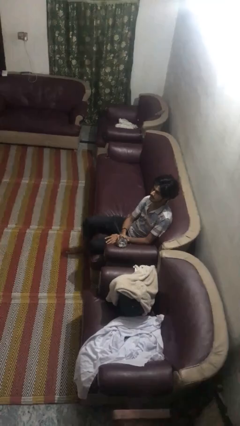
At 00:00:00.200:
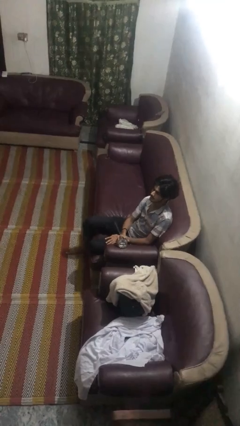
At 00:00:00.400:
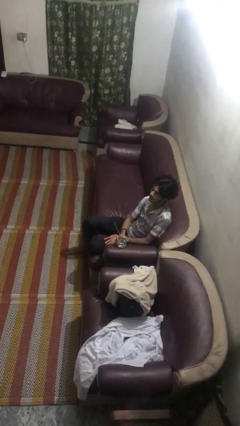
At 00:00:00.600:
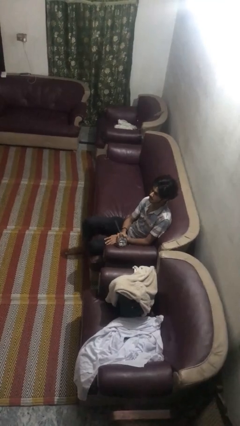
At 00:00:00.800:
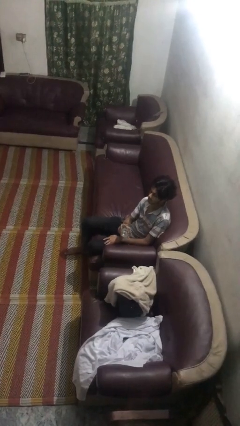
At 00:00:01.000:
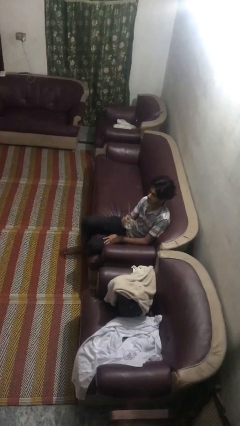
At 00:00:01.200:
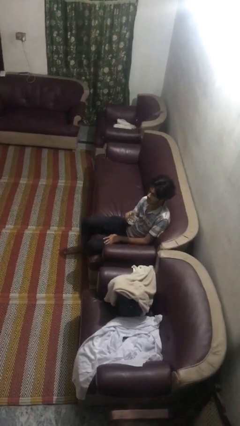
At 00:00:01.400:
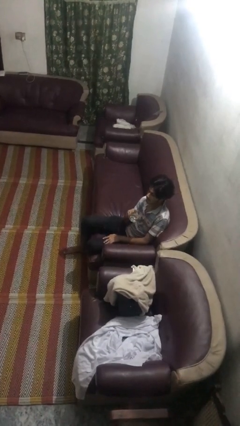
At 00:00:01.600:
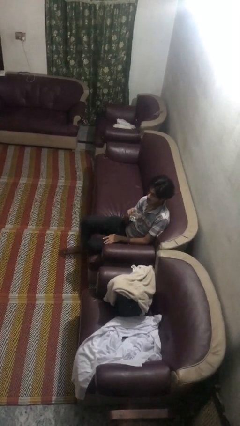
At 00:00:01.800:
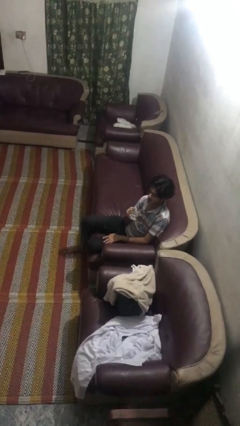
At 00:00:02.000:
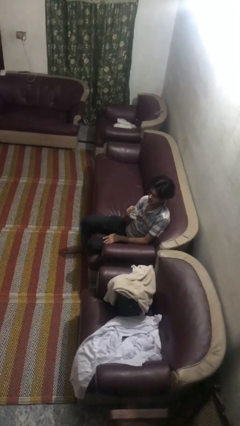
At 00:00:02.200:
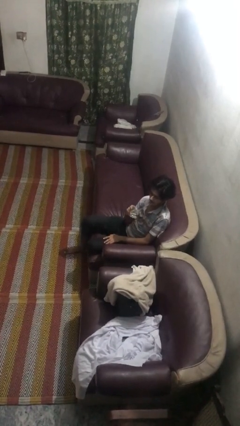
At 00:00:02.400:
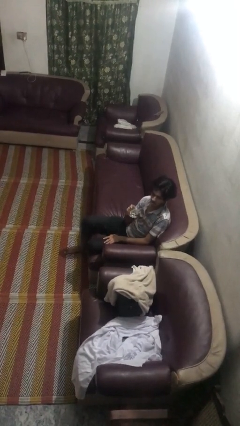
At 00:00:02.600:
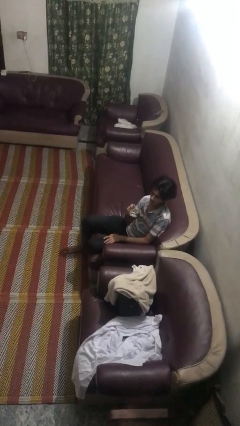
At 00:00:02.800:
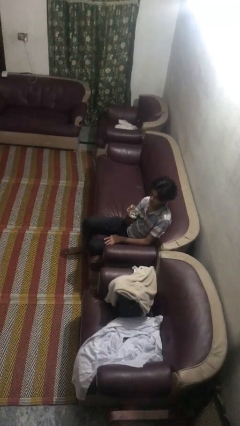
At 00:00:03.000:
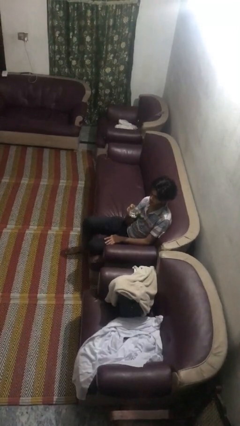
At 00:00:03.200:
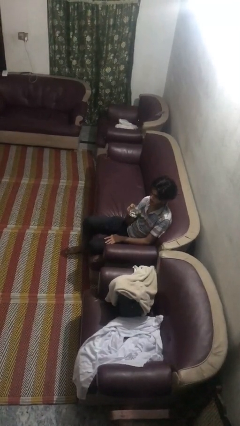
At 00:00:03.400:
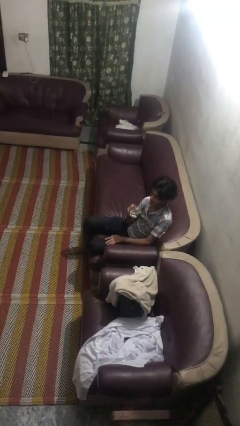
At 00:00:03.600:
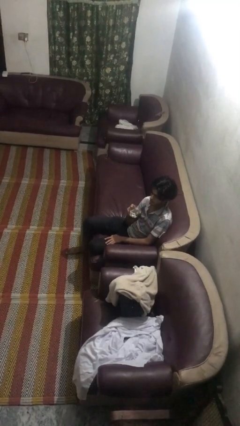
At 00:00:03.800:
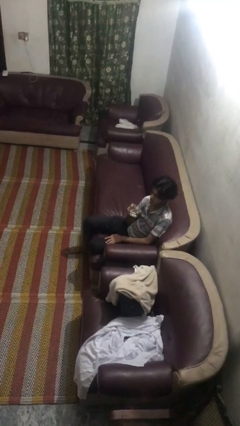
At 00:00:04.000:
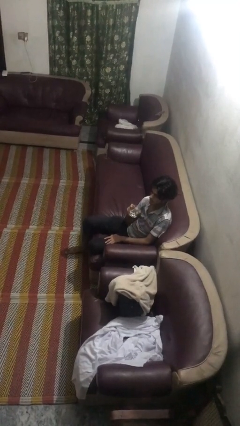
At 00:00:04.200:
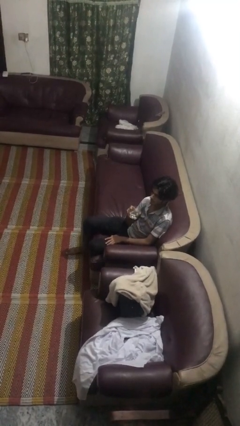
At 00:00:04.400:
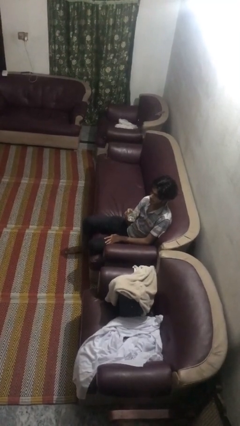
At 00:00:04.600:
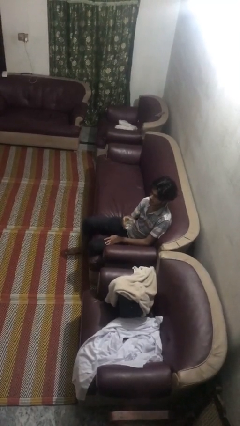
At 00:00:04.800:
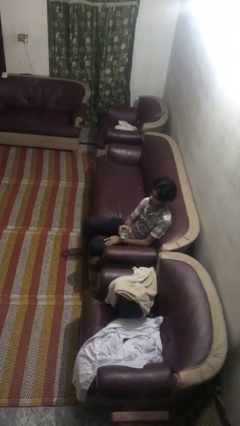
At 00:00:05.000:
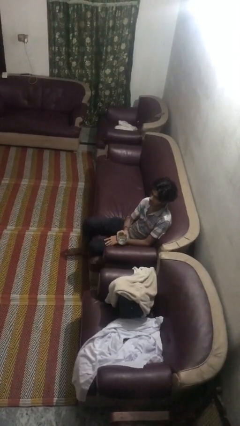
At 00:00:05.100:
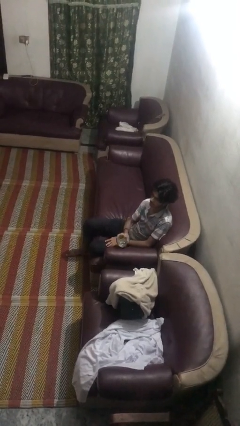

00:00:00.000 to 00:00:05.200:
person drinks from straw

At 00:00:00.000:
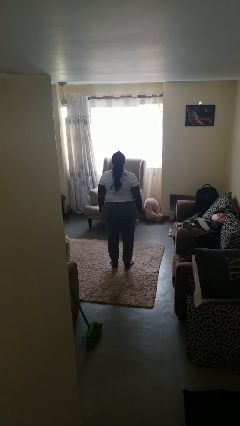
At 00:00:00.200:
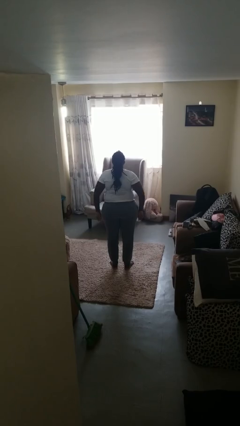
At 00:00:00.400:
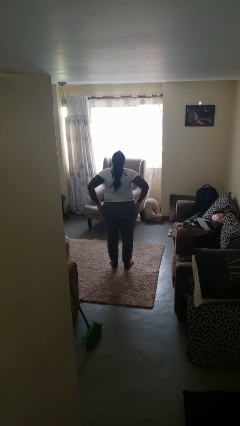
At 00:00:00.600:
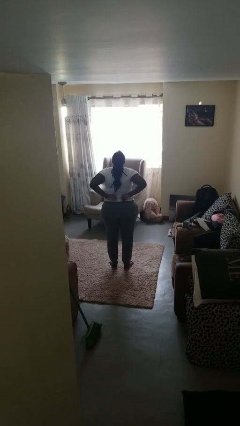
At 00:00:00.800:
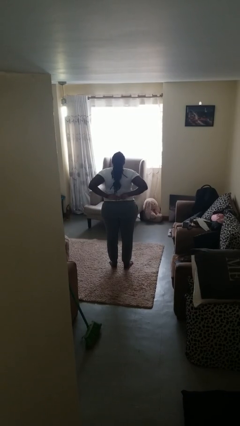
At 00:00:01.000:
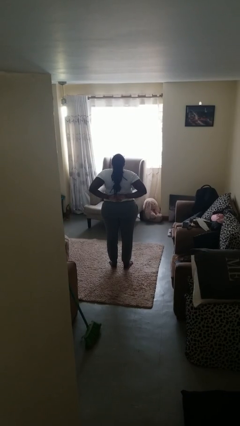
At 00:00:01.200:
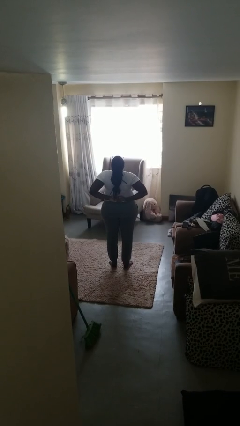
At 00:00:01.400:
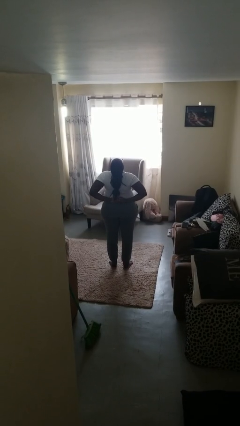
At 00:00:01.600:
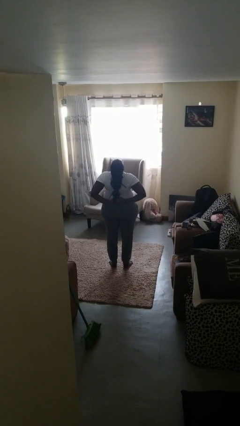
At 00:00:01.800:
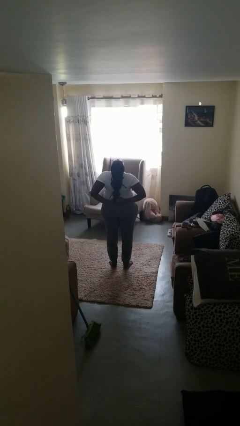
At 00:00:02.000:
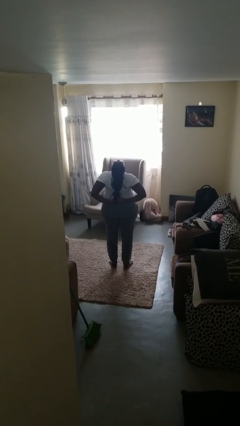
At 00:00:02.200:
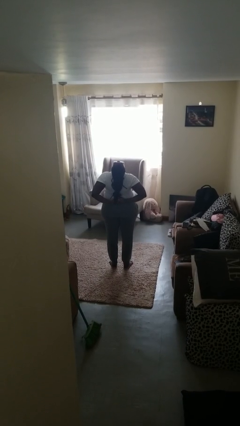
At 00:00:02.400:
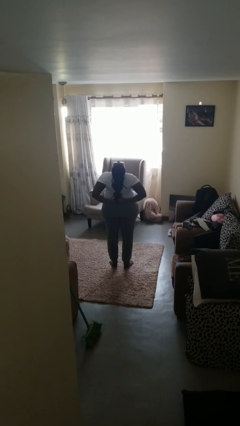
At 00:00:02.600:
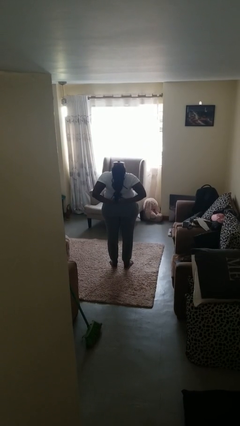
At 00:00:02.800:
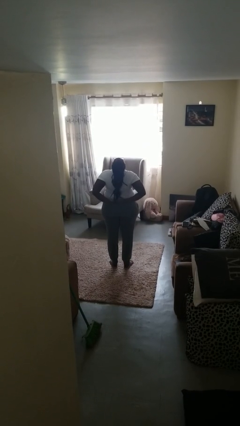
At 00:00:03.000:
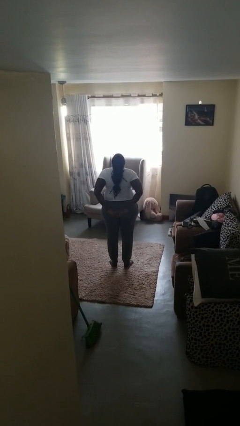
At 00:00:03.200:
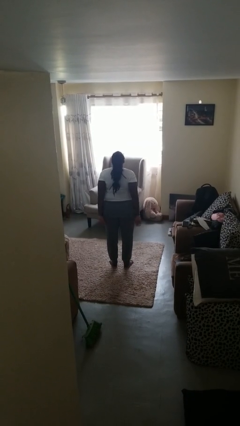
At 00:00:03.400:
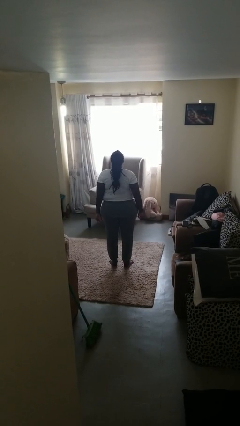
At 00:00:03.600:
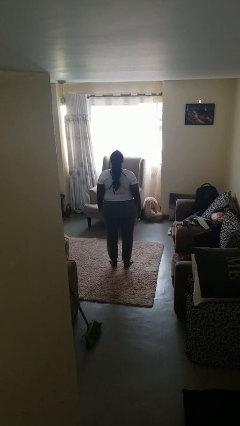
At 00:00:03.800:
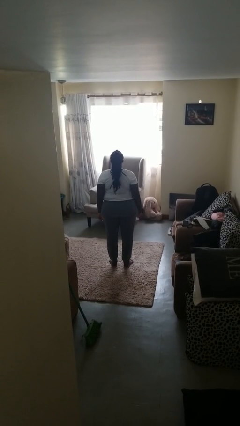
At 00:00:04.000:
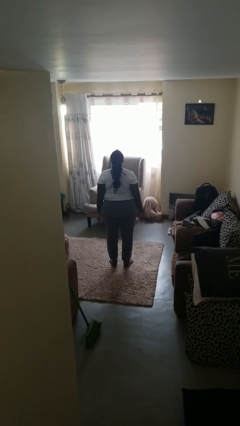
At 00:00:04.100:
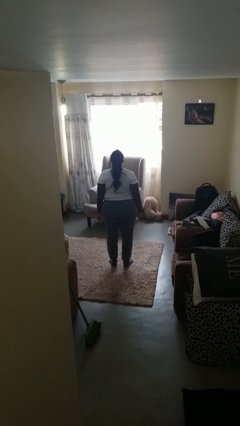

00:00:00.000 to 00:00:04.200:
person stretches back

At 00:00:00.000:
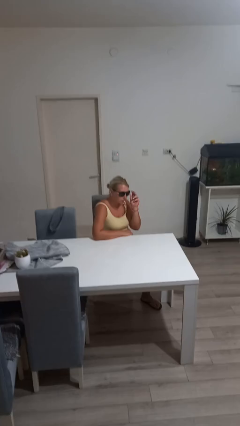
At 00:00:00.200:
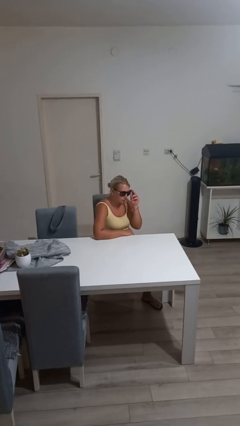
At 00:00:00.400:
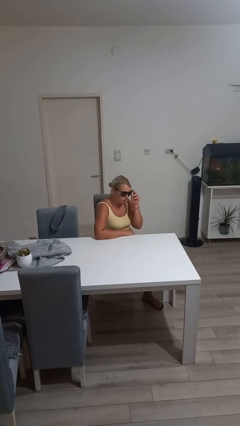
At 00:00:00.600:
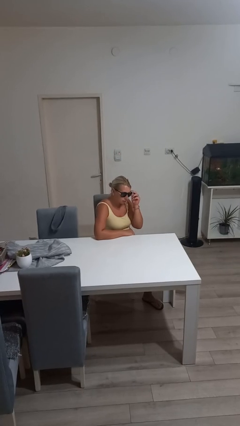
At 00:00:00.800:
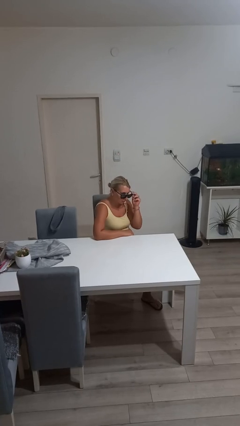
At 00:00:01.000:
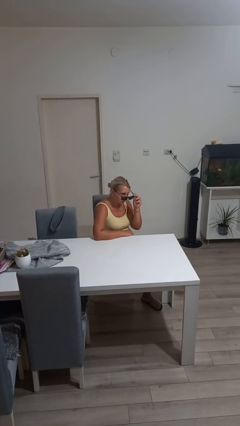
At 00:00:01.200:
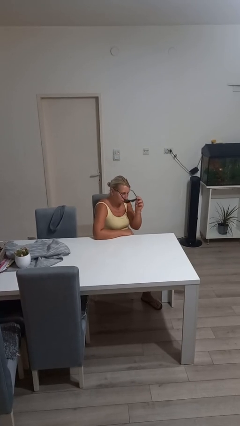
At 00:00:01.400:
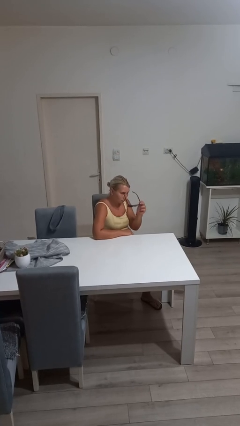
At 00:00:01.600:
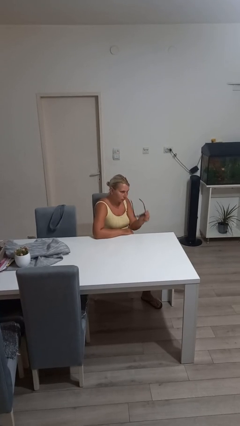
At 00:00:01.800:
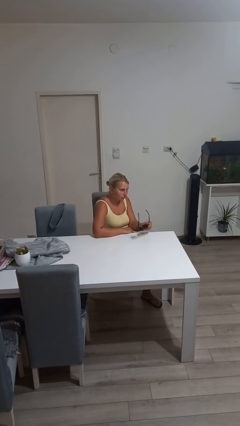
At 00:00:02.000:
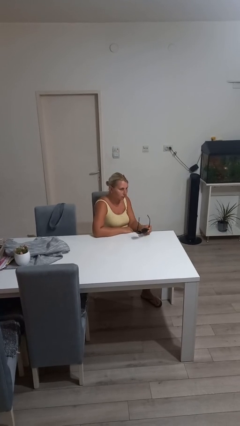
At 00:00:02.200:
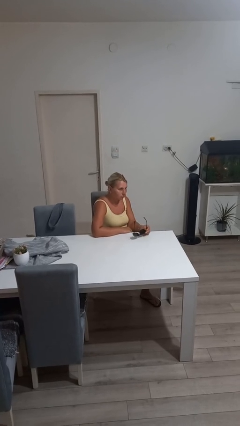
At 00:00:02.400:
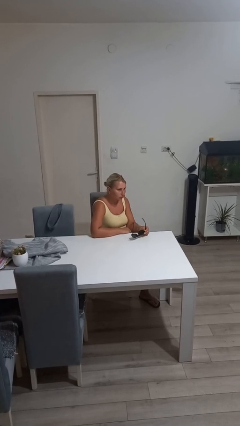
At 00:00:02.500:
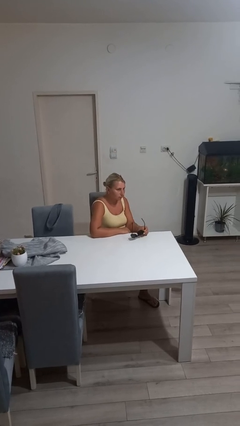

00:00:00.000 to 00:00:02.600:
person takes off sunglasses

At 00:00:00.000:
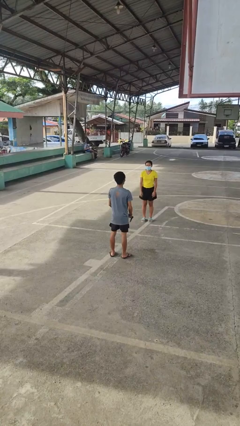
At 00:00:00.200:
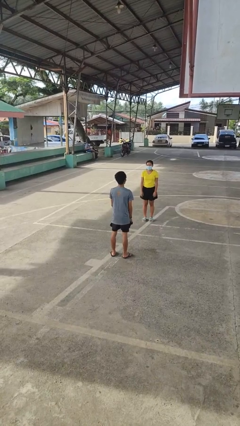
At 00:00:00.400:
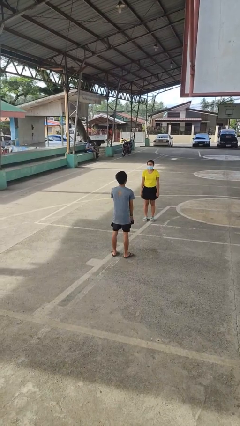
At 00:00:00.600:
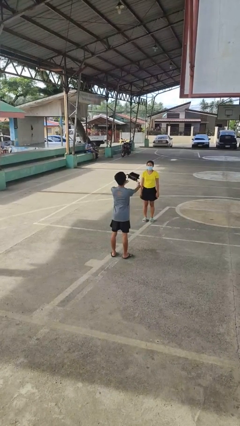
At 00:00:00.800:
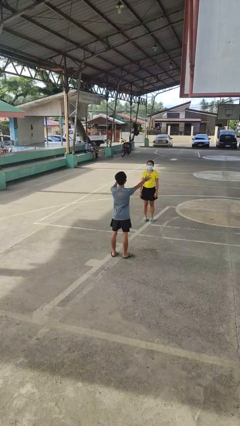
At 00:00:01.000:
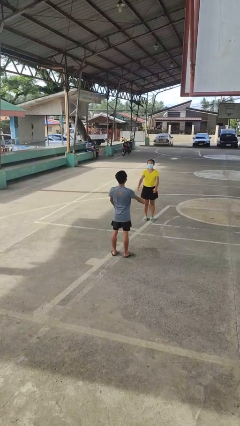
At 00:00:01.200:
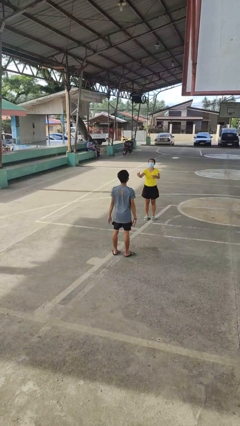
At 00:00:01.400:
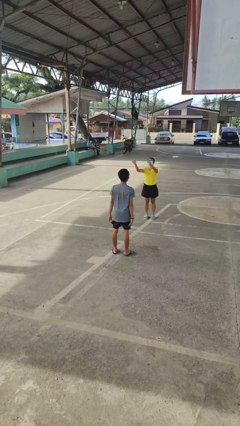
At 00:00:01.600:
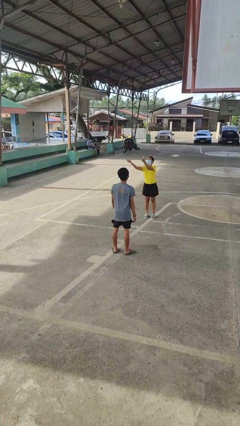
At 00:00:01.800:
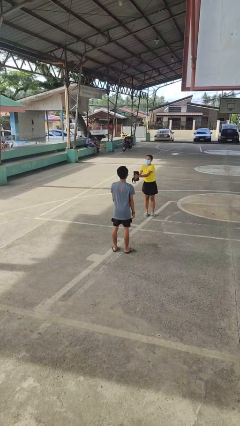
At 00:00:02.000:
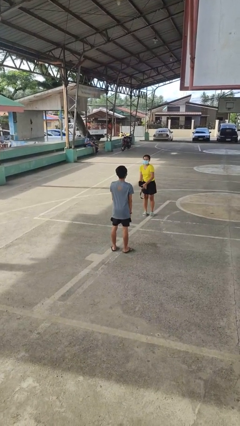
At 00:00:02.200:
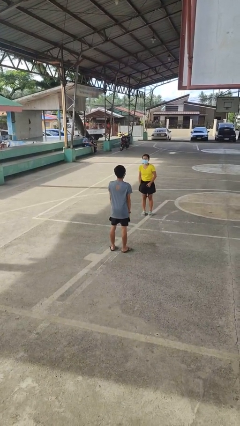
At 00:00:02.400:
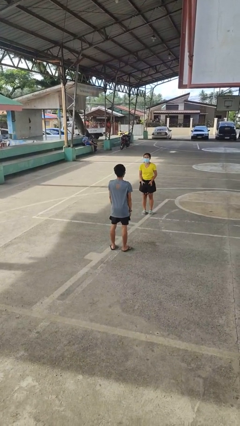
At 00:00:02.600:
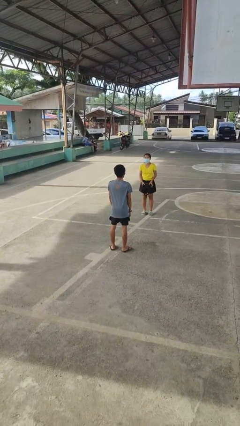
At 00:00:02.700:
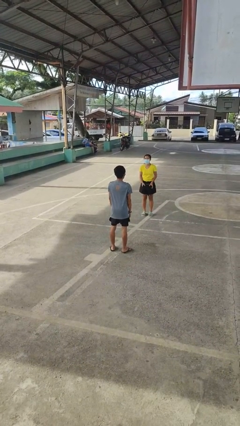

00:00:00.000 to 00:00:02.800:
person throws object to person

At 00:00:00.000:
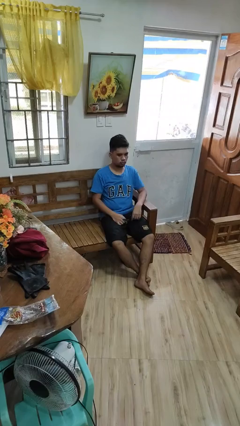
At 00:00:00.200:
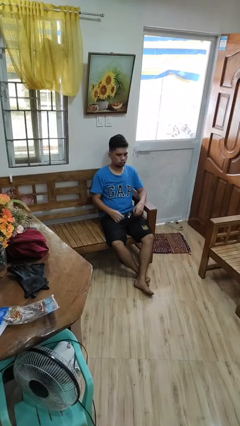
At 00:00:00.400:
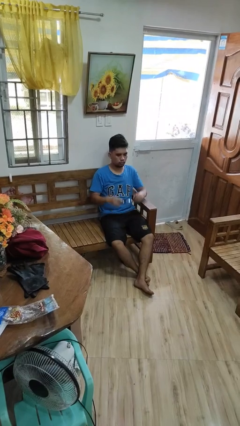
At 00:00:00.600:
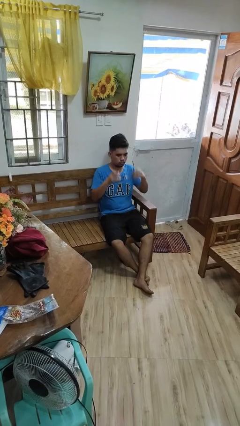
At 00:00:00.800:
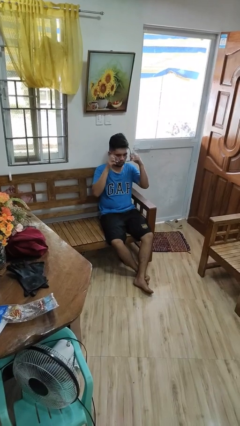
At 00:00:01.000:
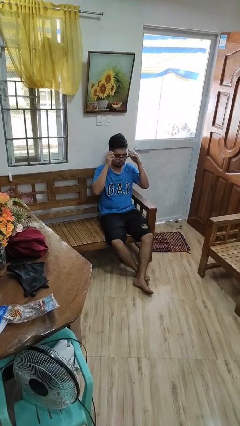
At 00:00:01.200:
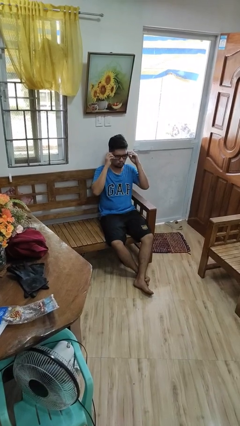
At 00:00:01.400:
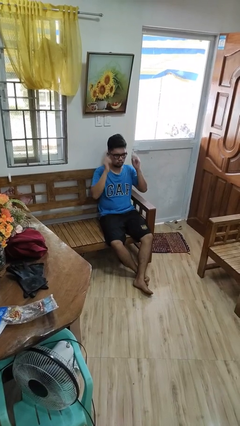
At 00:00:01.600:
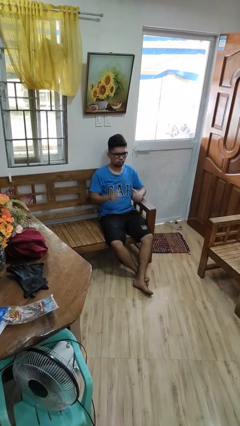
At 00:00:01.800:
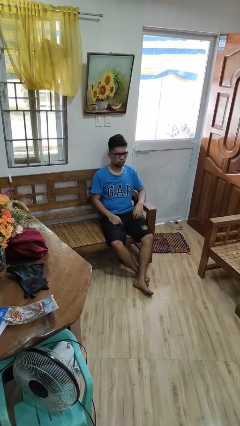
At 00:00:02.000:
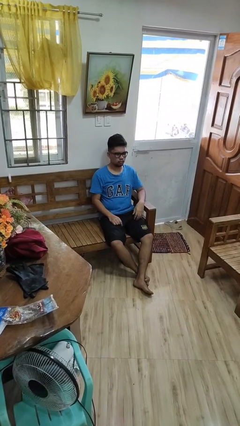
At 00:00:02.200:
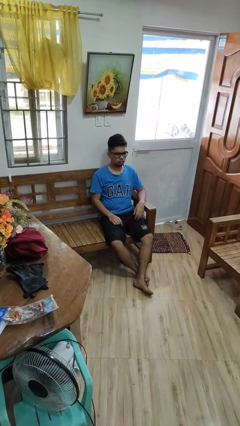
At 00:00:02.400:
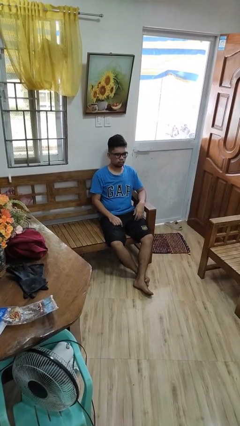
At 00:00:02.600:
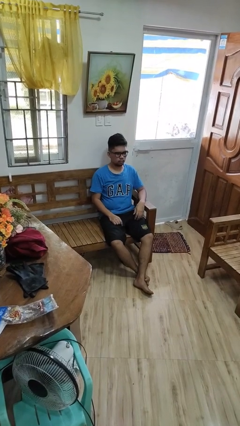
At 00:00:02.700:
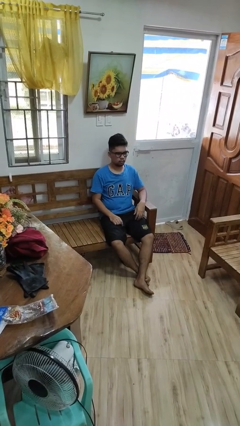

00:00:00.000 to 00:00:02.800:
person puts on glasses
